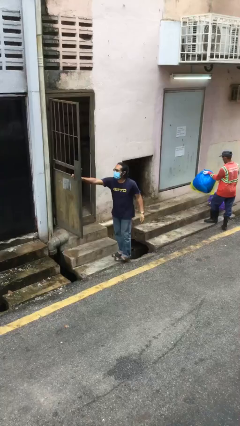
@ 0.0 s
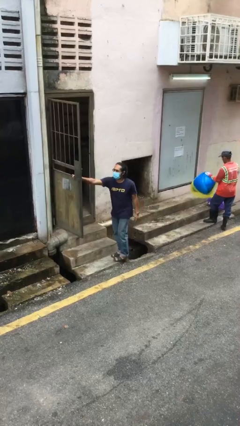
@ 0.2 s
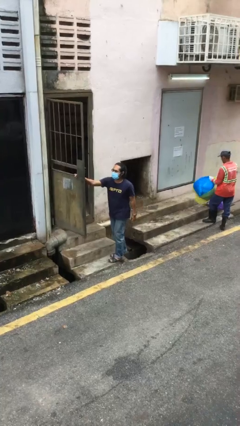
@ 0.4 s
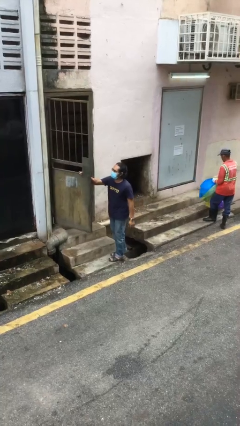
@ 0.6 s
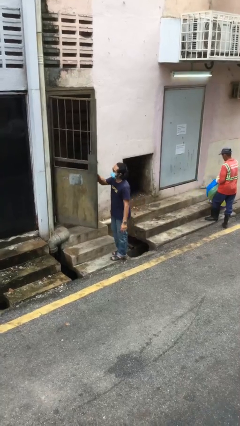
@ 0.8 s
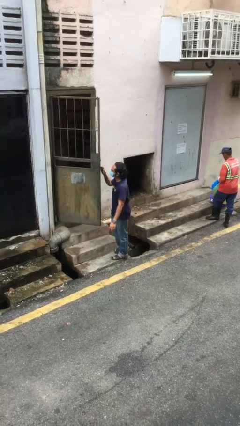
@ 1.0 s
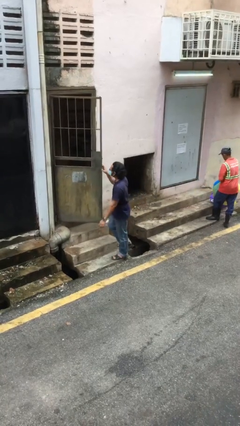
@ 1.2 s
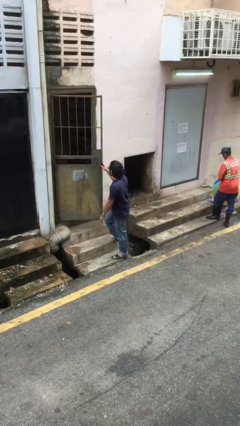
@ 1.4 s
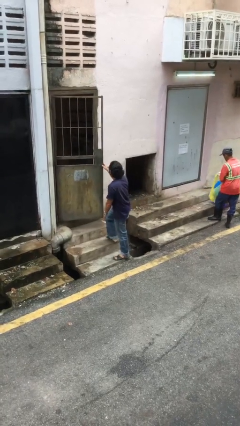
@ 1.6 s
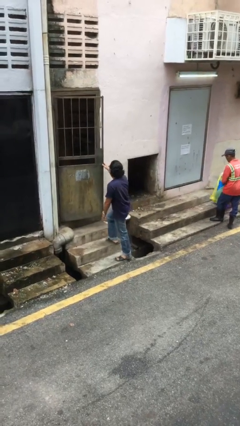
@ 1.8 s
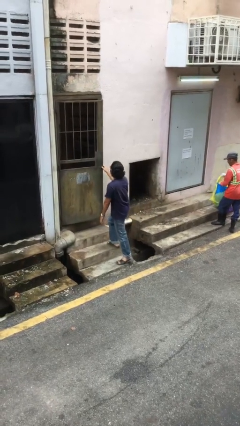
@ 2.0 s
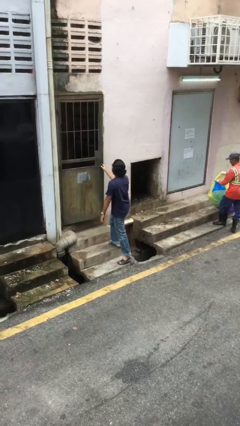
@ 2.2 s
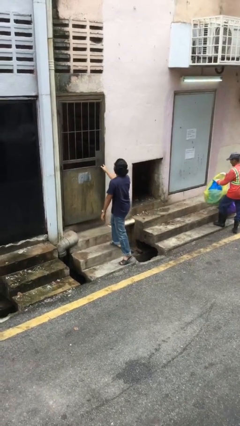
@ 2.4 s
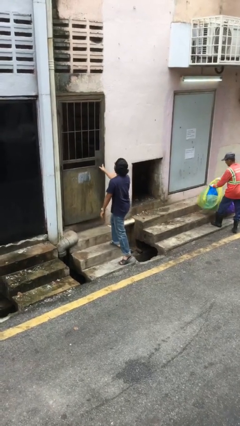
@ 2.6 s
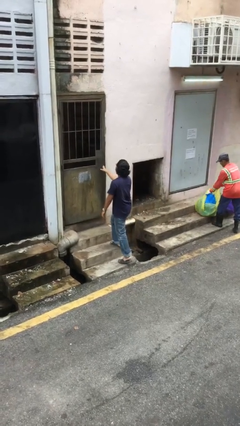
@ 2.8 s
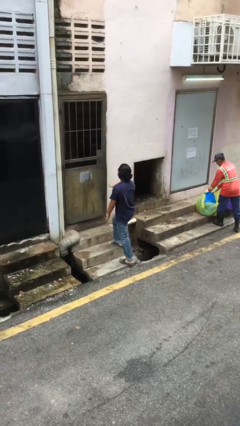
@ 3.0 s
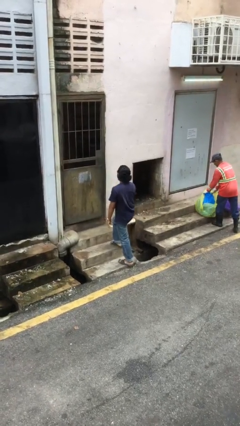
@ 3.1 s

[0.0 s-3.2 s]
person closes facility door

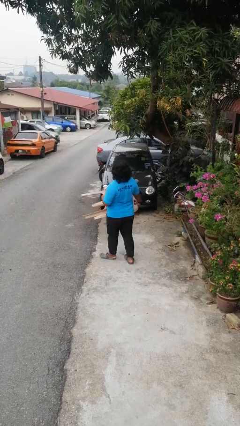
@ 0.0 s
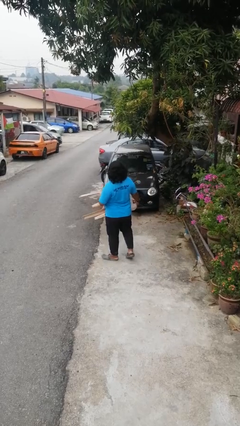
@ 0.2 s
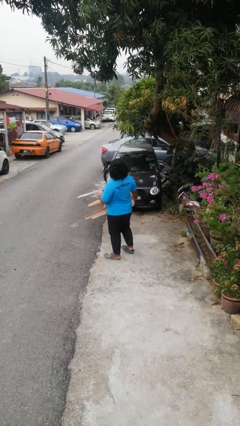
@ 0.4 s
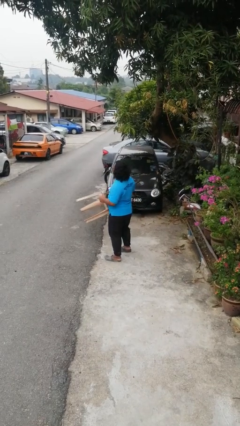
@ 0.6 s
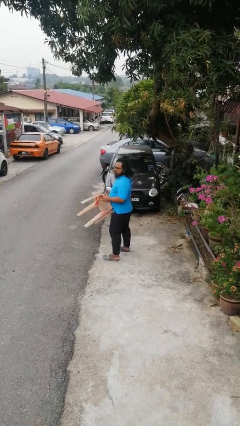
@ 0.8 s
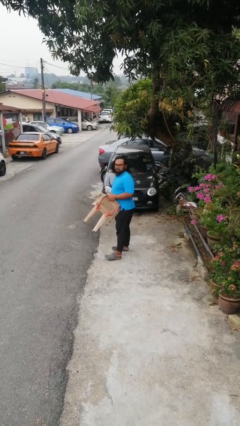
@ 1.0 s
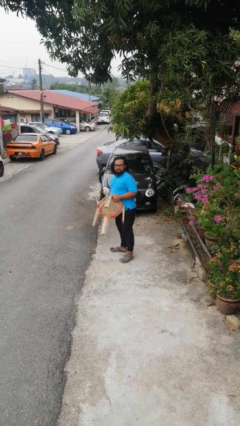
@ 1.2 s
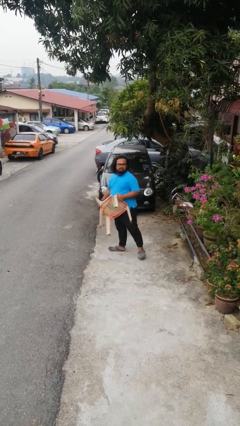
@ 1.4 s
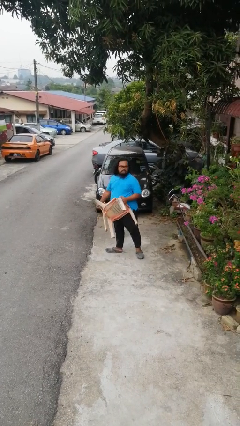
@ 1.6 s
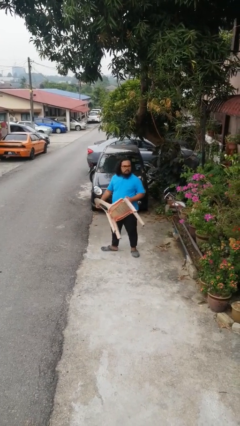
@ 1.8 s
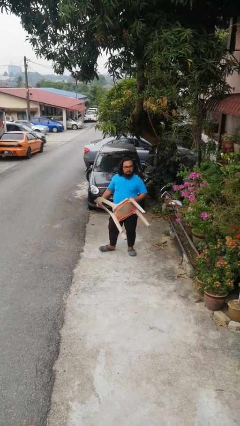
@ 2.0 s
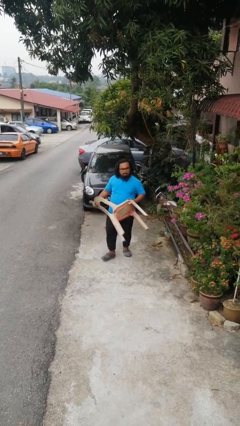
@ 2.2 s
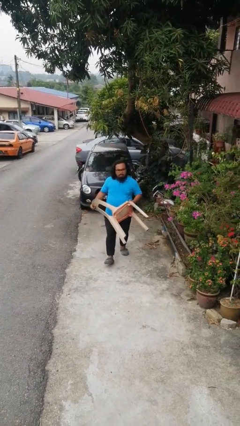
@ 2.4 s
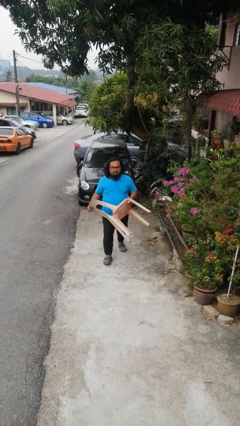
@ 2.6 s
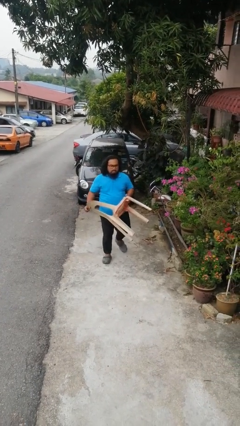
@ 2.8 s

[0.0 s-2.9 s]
person carries furniture

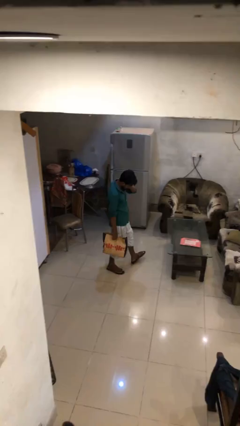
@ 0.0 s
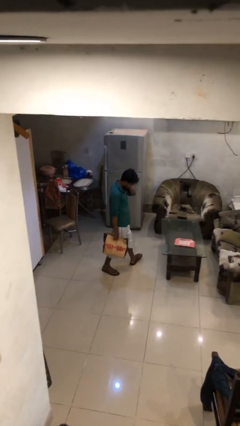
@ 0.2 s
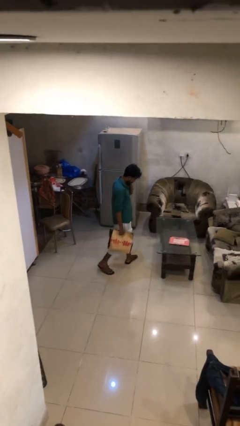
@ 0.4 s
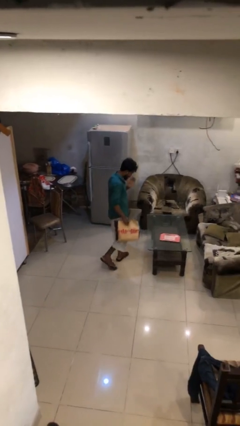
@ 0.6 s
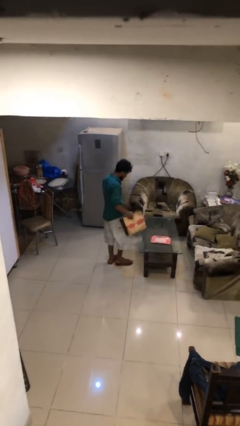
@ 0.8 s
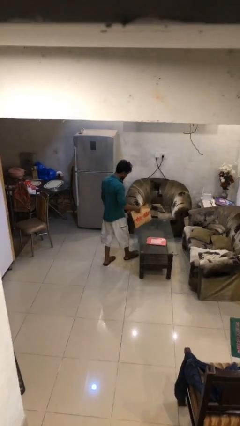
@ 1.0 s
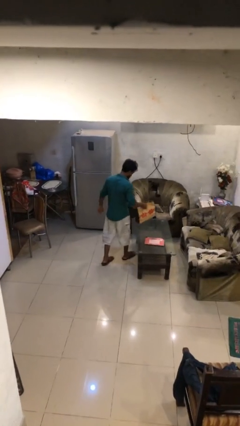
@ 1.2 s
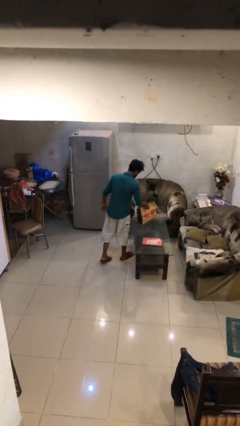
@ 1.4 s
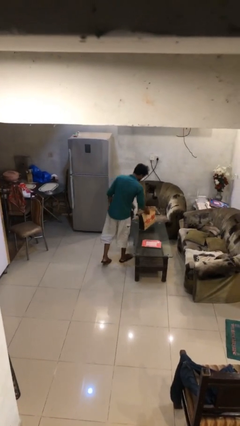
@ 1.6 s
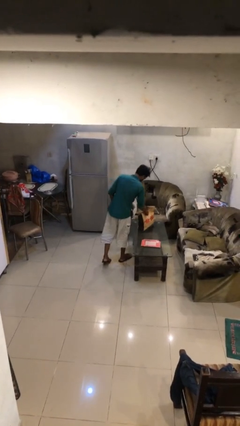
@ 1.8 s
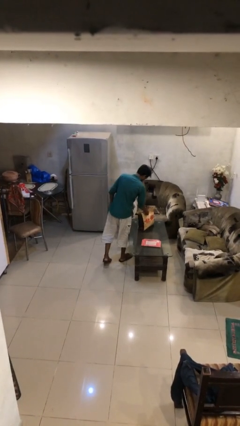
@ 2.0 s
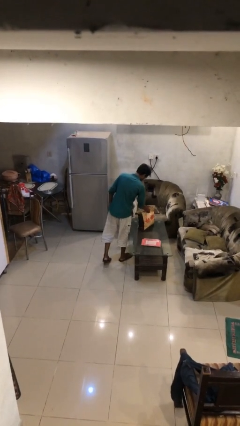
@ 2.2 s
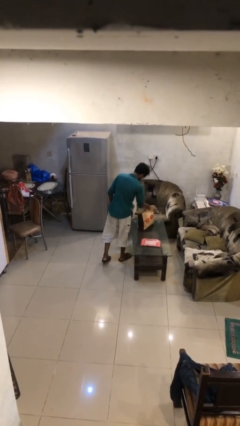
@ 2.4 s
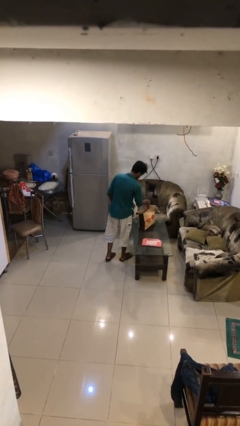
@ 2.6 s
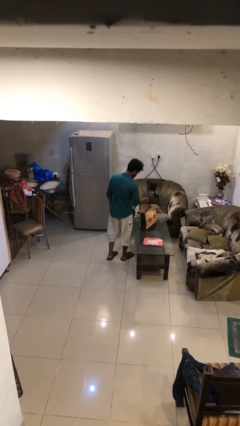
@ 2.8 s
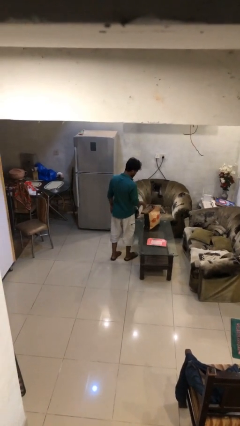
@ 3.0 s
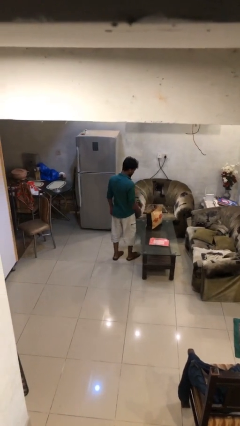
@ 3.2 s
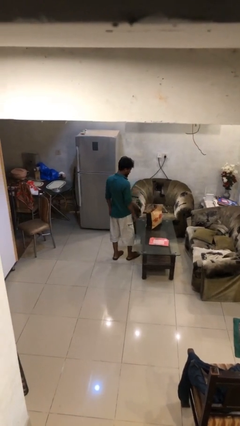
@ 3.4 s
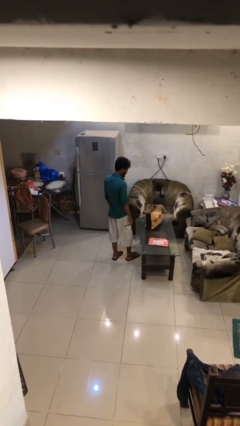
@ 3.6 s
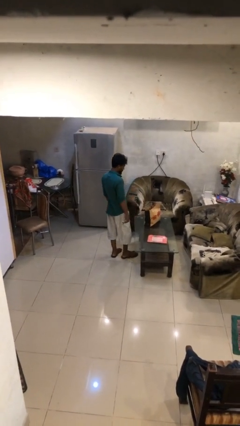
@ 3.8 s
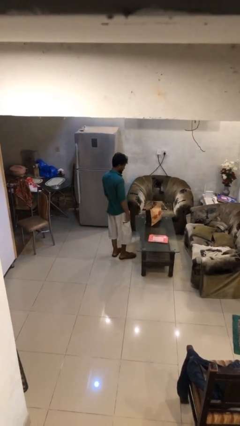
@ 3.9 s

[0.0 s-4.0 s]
person puts down object on table

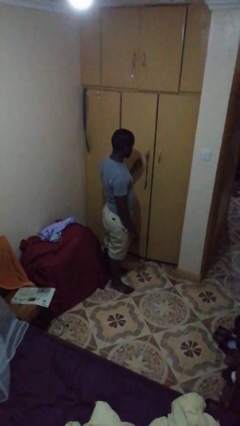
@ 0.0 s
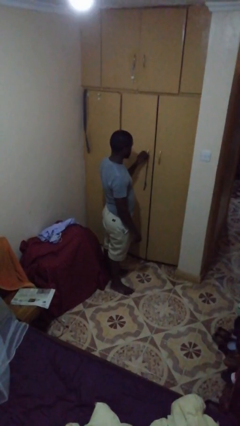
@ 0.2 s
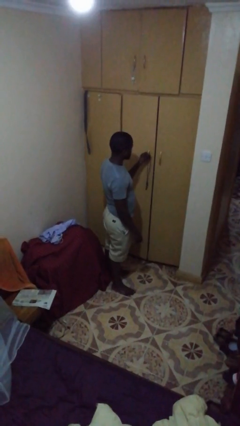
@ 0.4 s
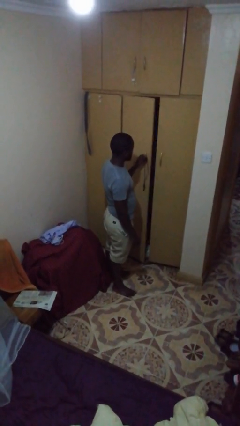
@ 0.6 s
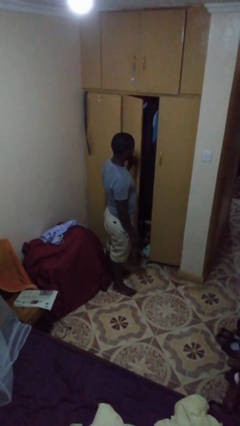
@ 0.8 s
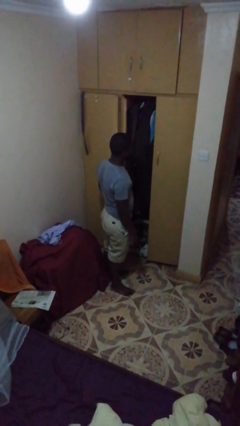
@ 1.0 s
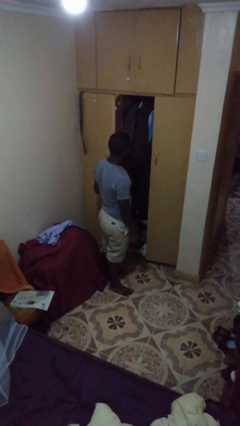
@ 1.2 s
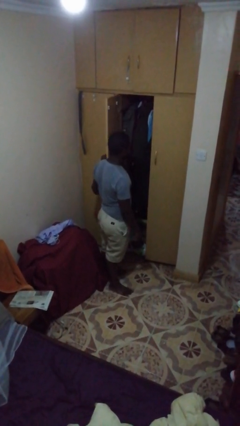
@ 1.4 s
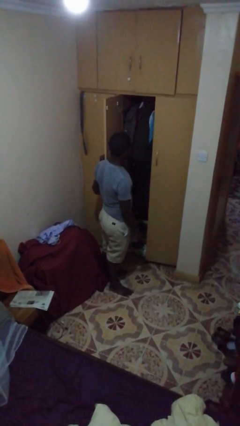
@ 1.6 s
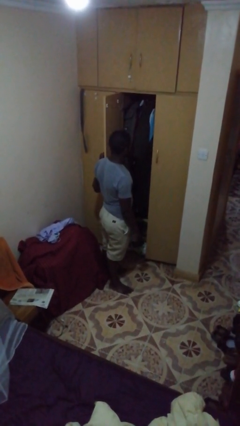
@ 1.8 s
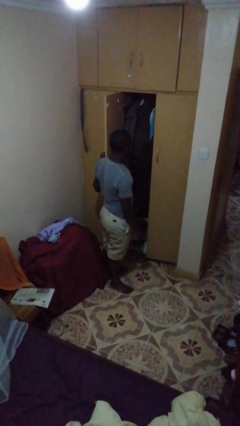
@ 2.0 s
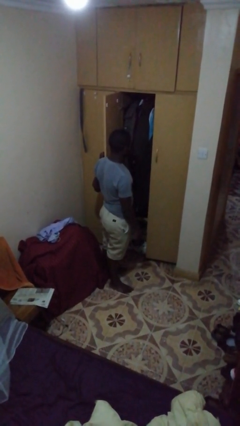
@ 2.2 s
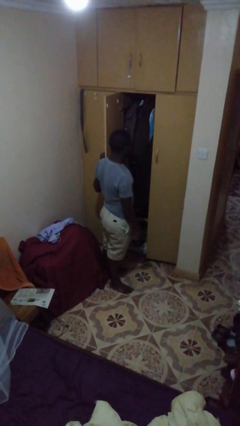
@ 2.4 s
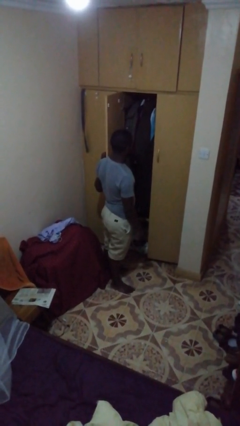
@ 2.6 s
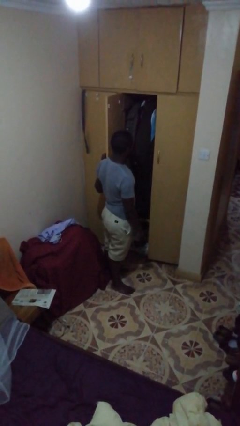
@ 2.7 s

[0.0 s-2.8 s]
person opens closet door

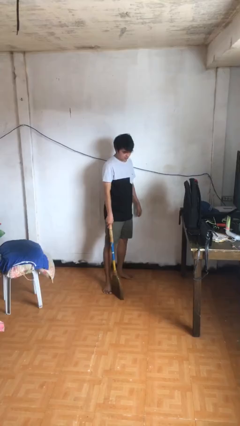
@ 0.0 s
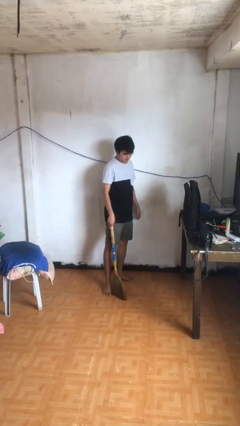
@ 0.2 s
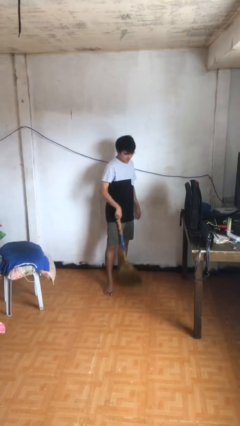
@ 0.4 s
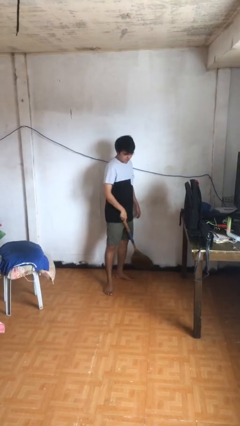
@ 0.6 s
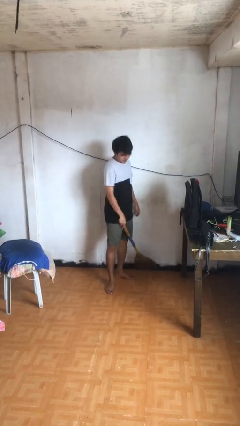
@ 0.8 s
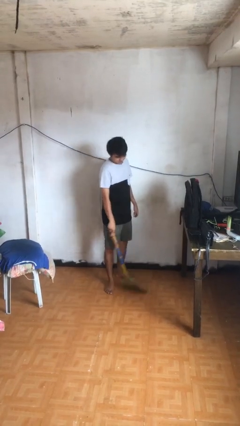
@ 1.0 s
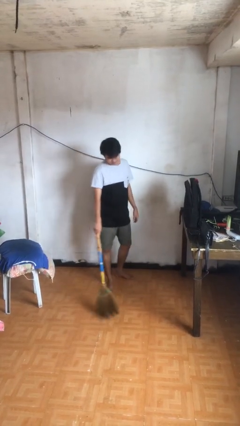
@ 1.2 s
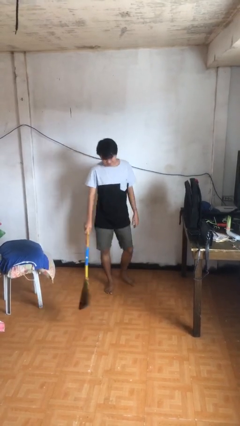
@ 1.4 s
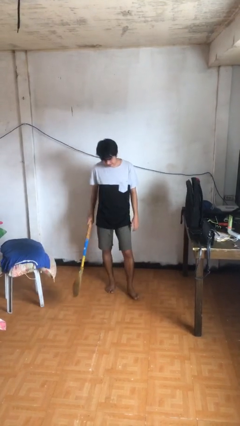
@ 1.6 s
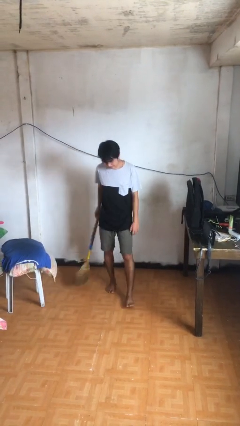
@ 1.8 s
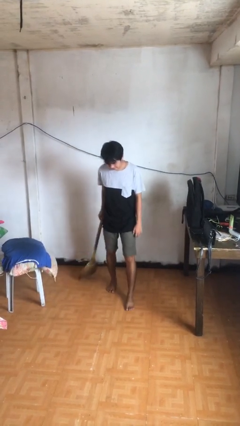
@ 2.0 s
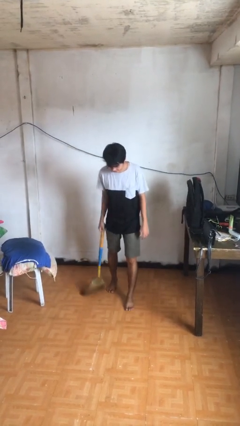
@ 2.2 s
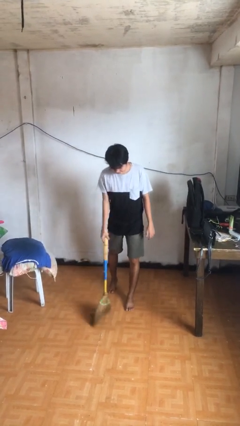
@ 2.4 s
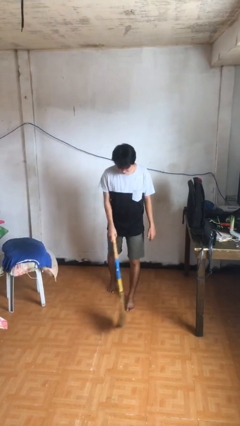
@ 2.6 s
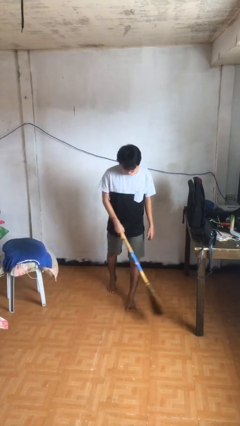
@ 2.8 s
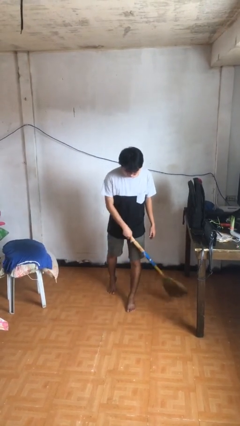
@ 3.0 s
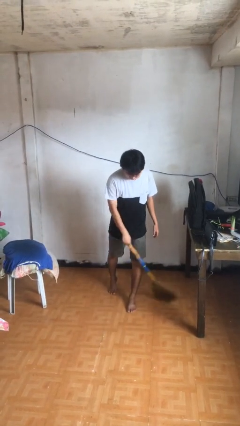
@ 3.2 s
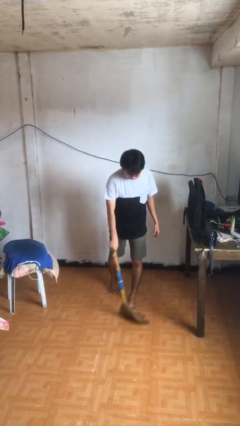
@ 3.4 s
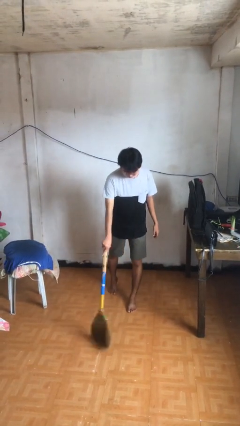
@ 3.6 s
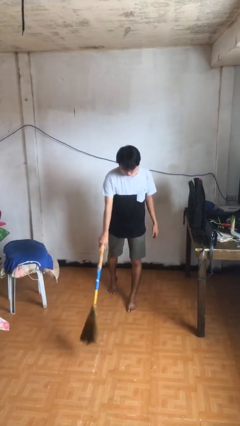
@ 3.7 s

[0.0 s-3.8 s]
person sweeps floor

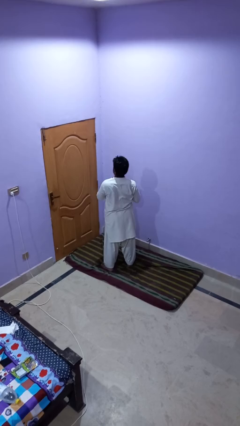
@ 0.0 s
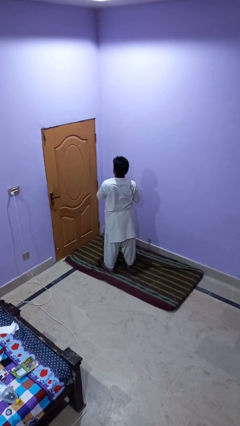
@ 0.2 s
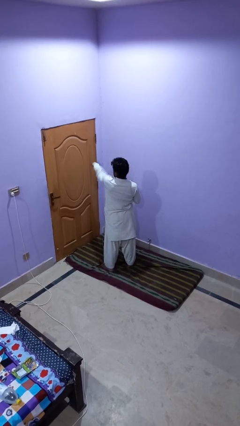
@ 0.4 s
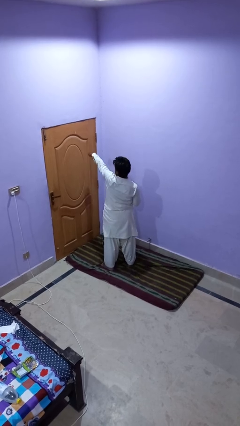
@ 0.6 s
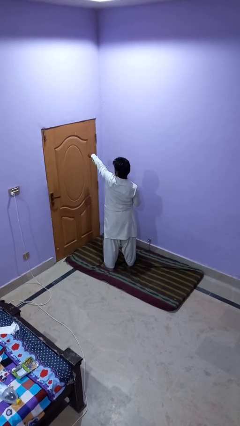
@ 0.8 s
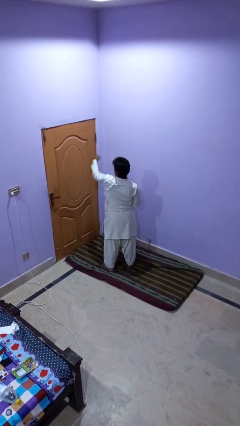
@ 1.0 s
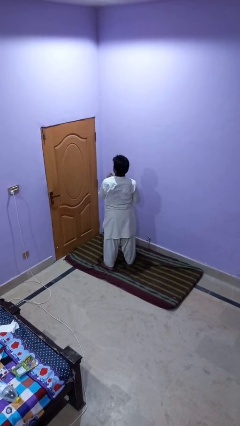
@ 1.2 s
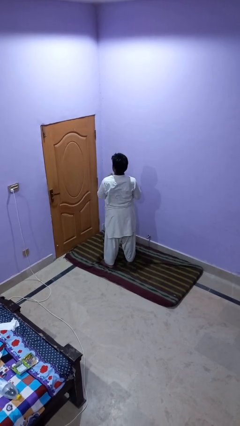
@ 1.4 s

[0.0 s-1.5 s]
person punches
